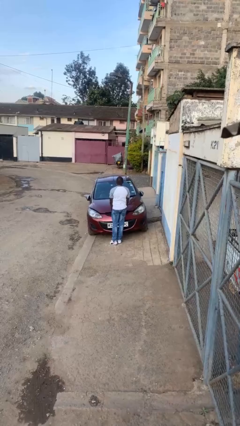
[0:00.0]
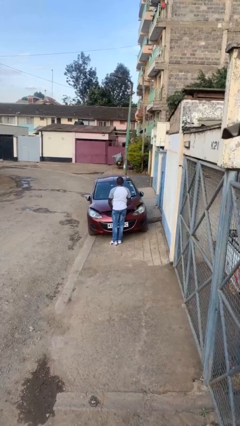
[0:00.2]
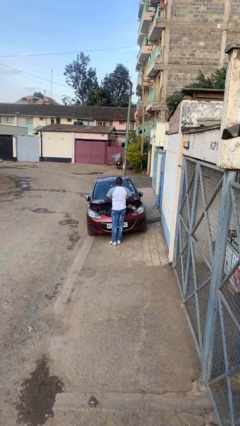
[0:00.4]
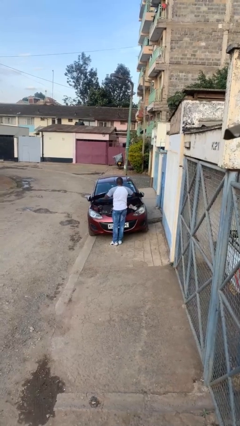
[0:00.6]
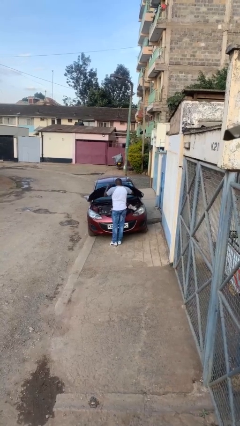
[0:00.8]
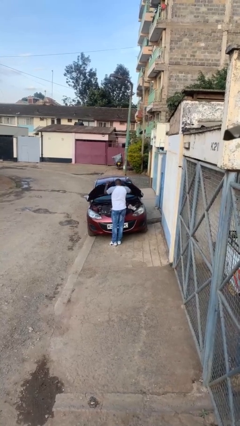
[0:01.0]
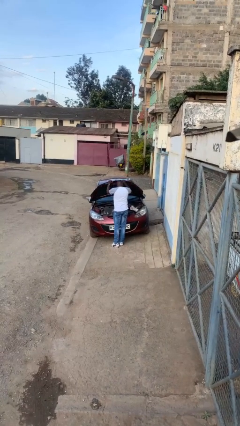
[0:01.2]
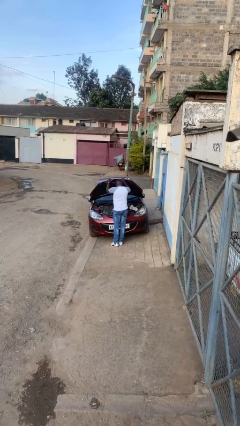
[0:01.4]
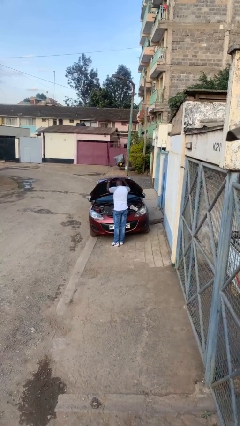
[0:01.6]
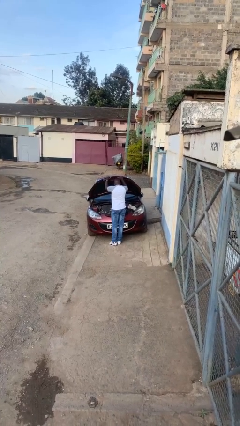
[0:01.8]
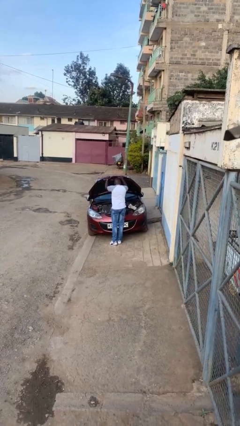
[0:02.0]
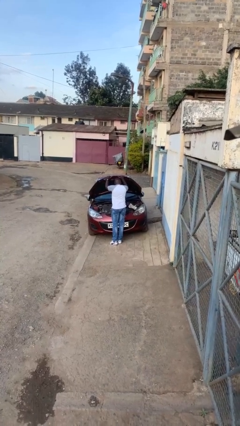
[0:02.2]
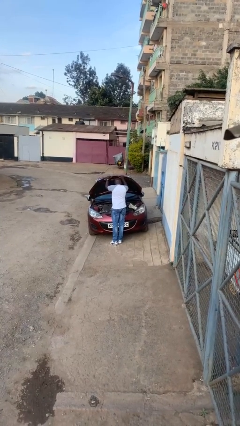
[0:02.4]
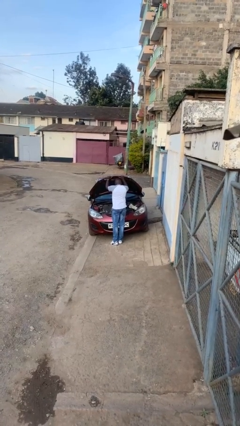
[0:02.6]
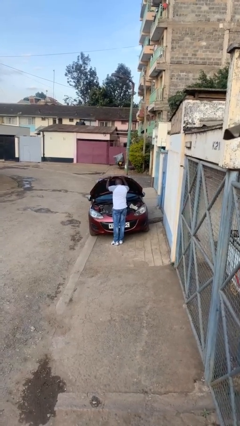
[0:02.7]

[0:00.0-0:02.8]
person opens car hood

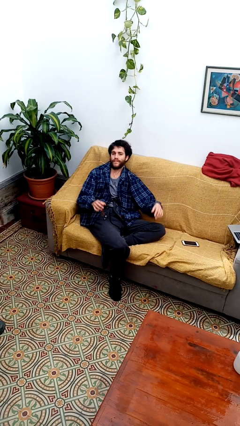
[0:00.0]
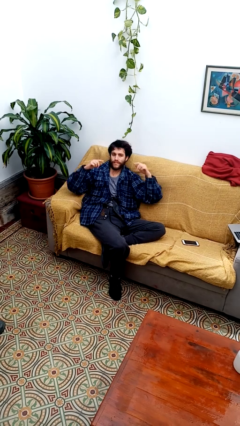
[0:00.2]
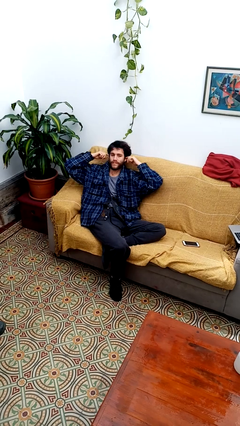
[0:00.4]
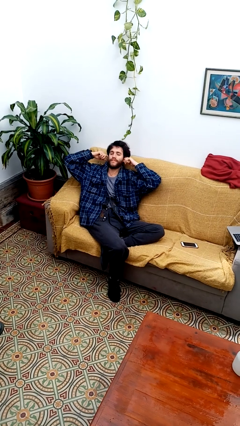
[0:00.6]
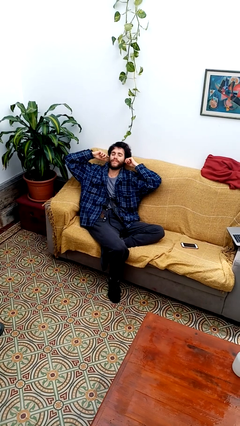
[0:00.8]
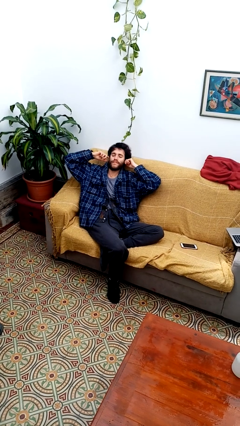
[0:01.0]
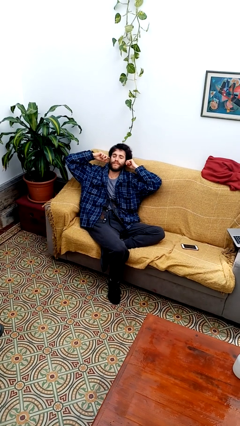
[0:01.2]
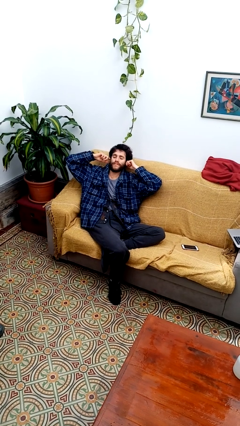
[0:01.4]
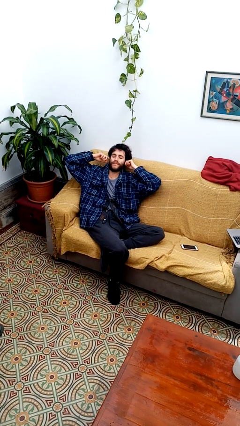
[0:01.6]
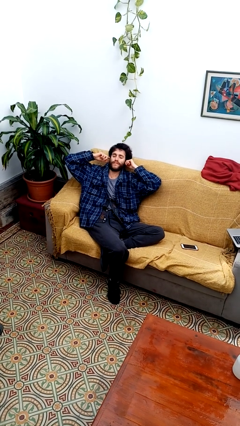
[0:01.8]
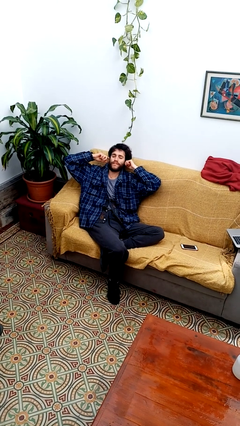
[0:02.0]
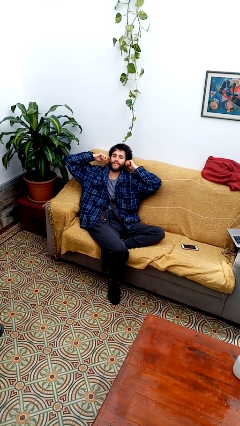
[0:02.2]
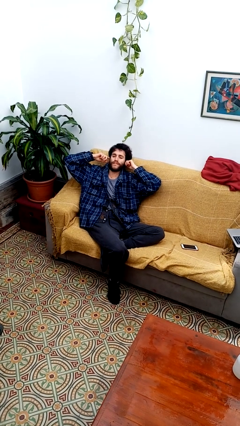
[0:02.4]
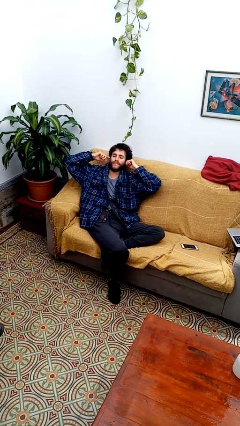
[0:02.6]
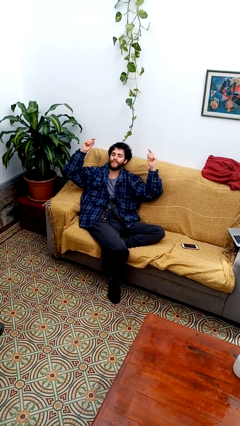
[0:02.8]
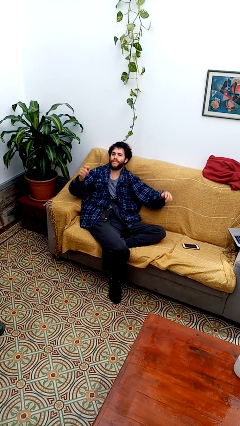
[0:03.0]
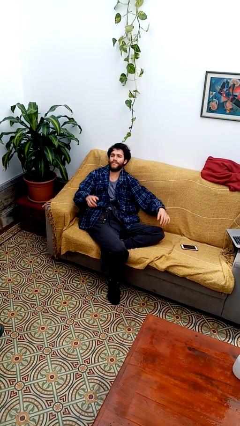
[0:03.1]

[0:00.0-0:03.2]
person puts fingers in ear

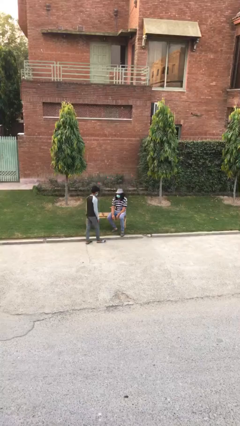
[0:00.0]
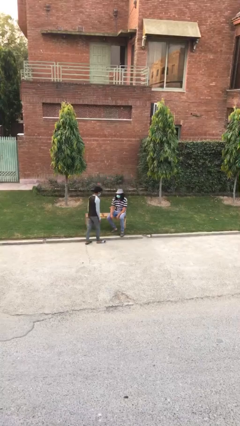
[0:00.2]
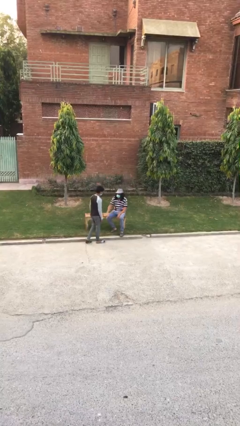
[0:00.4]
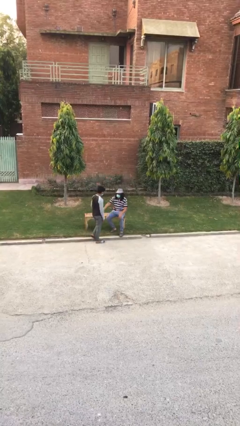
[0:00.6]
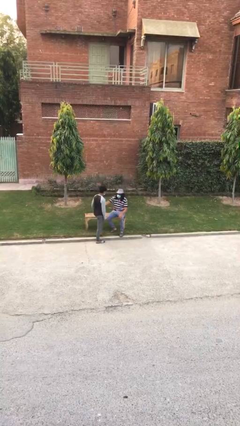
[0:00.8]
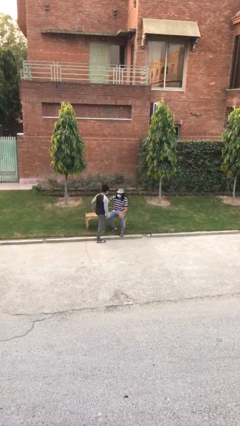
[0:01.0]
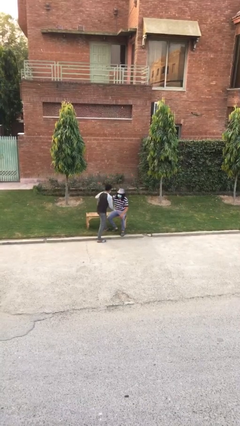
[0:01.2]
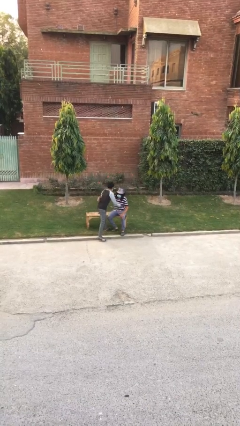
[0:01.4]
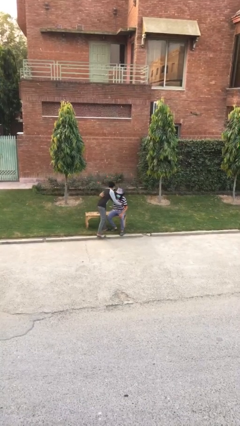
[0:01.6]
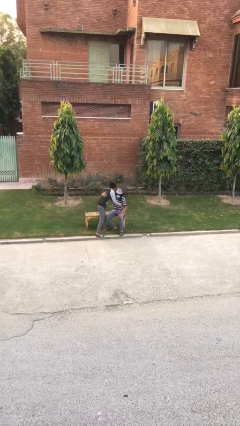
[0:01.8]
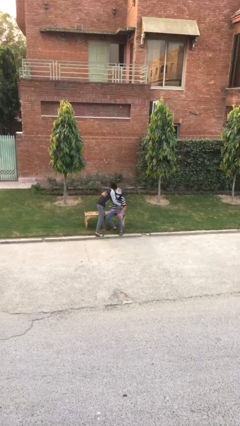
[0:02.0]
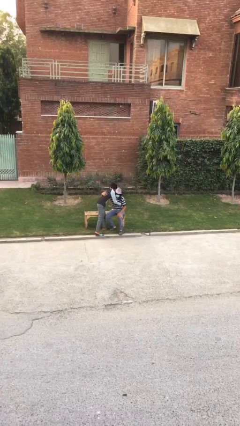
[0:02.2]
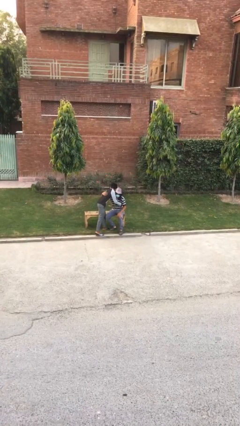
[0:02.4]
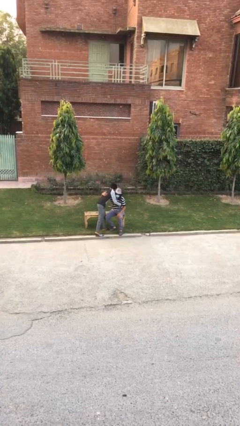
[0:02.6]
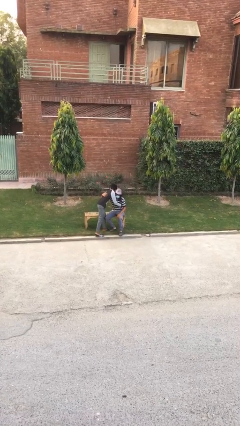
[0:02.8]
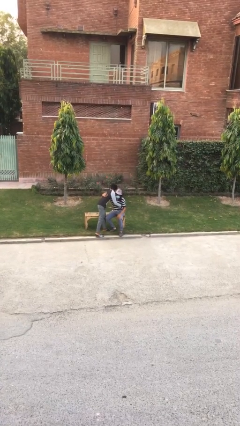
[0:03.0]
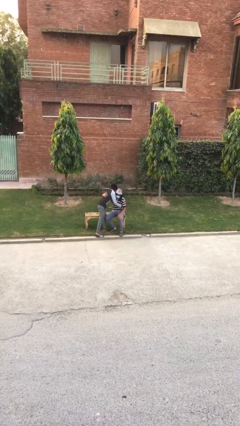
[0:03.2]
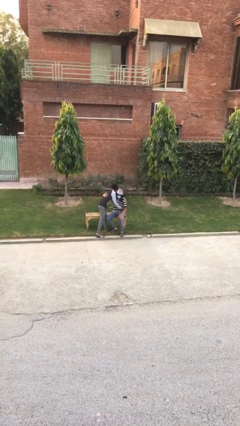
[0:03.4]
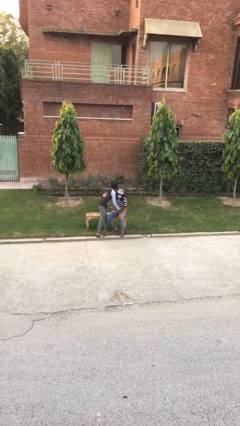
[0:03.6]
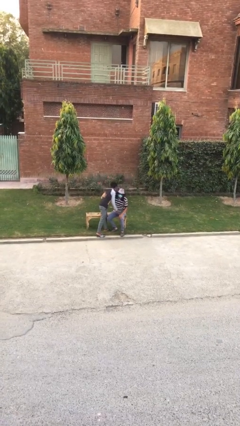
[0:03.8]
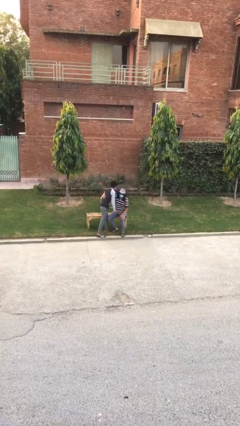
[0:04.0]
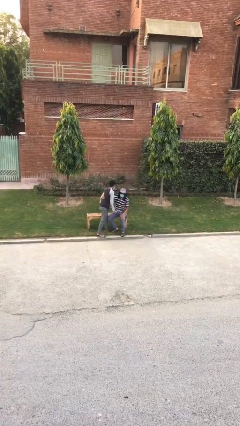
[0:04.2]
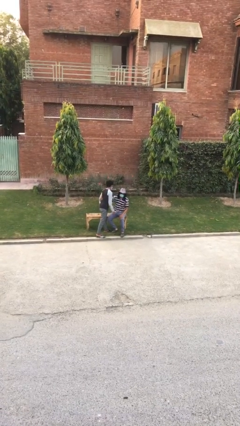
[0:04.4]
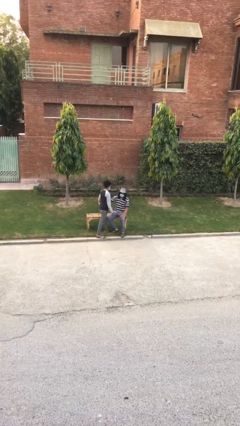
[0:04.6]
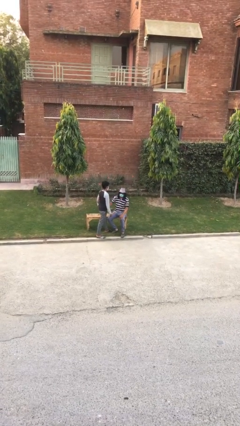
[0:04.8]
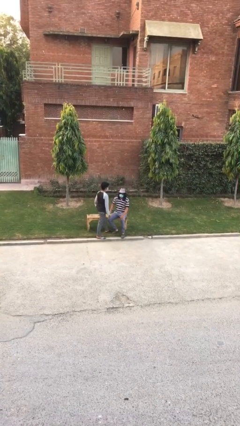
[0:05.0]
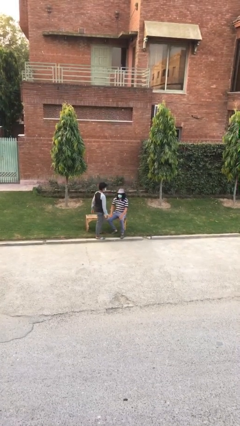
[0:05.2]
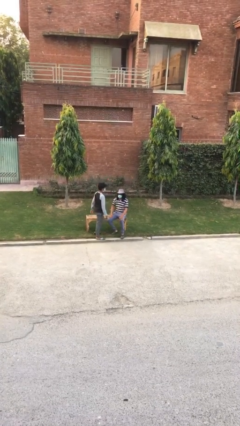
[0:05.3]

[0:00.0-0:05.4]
person embraces person

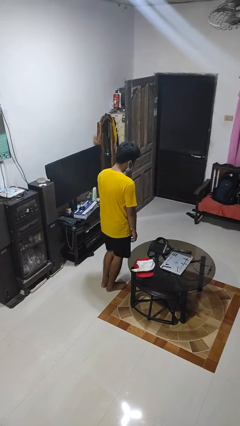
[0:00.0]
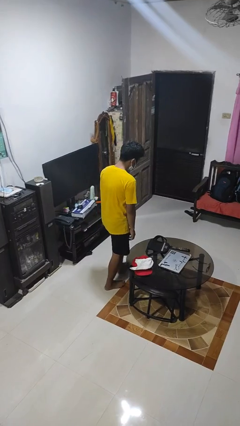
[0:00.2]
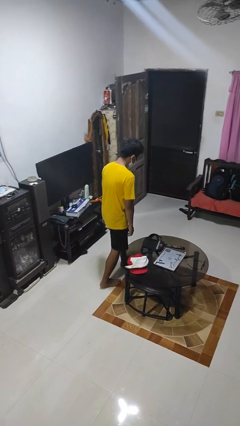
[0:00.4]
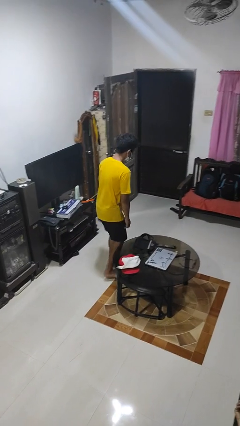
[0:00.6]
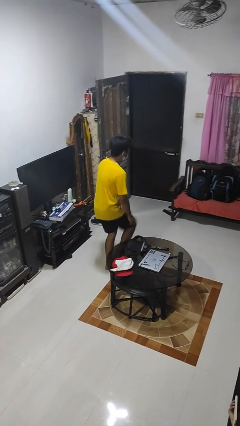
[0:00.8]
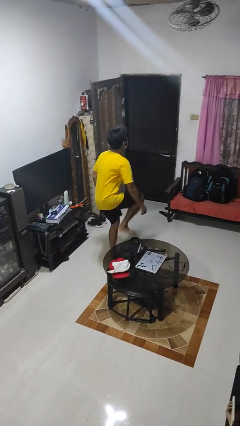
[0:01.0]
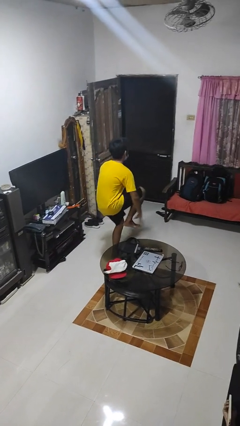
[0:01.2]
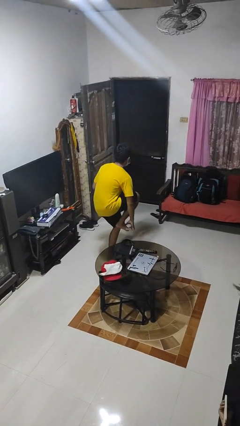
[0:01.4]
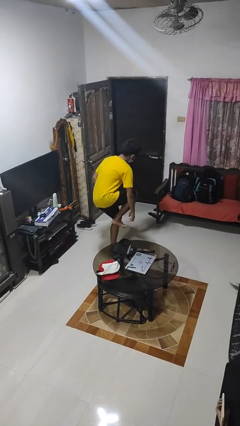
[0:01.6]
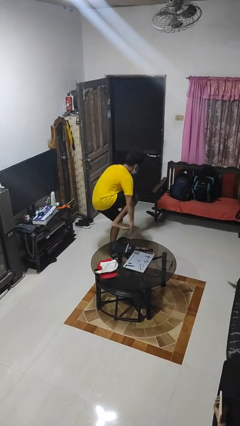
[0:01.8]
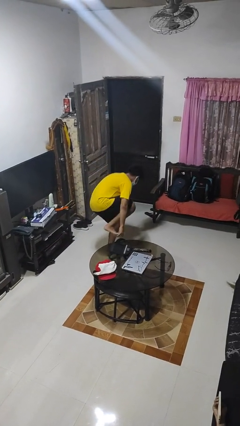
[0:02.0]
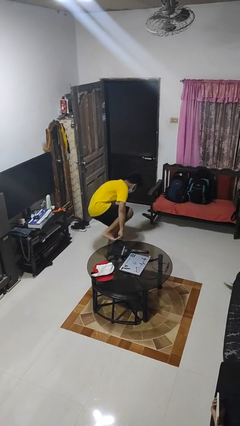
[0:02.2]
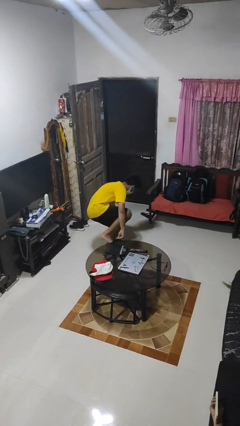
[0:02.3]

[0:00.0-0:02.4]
person trips on object on floor

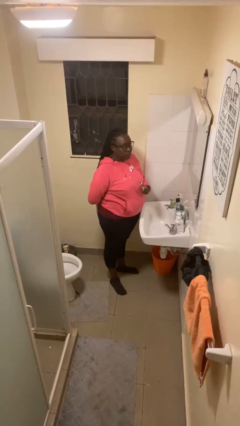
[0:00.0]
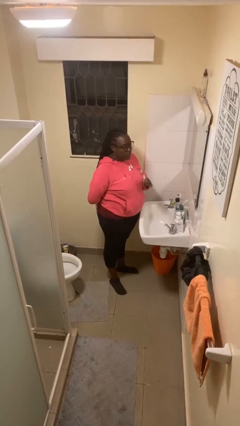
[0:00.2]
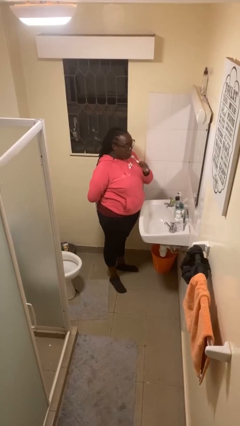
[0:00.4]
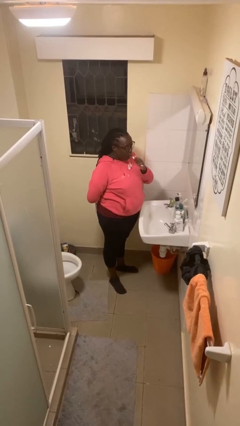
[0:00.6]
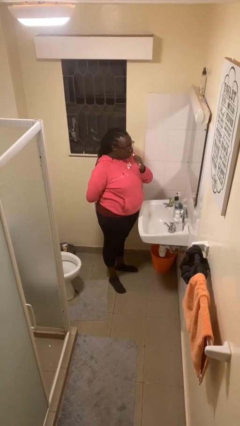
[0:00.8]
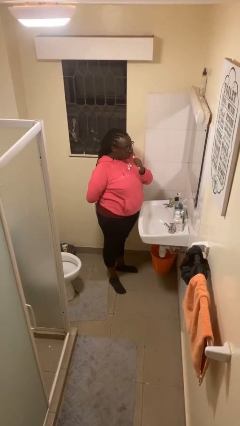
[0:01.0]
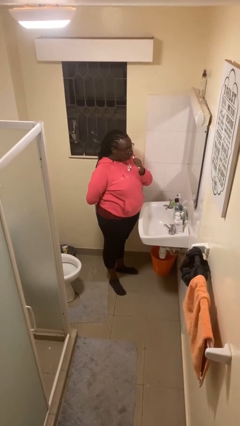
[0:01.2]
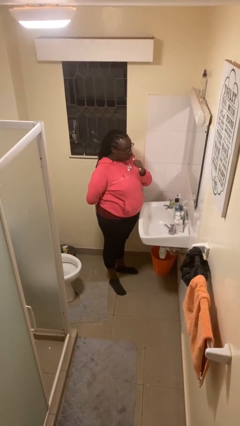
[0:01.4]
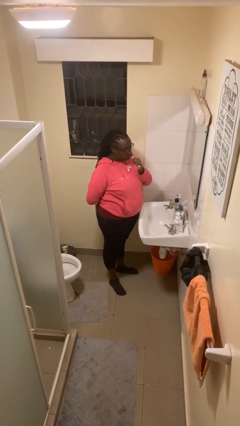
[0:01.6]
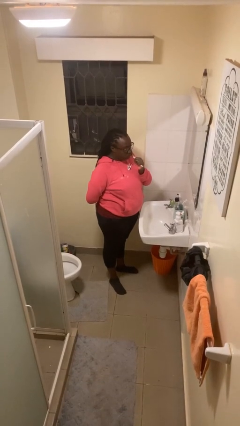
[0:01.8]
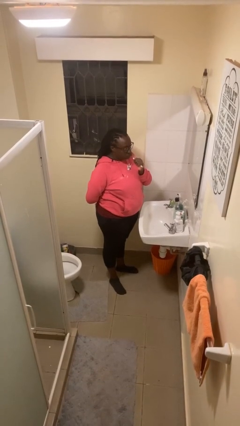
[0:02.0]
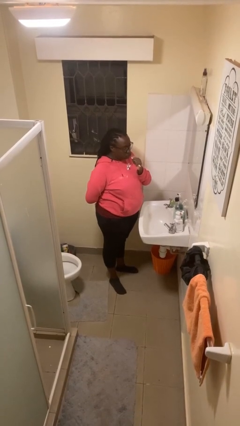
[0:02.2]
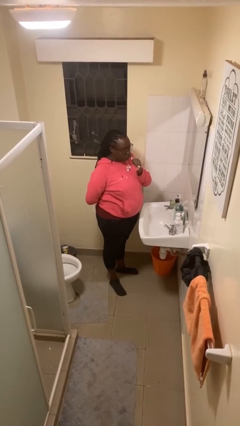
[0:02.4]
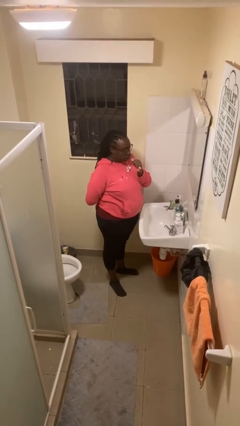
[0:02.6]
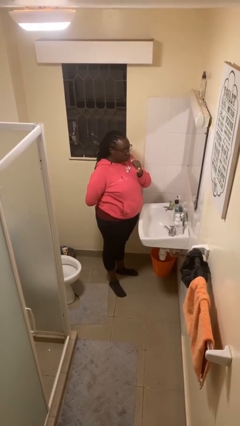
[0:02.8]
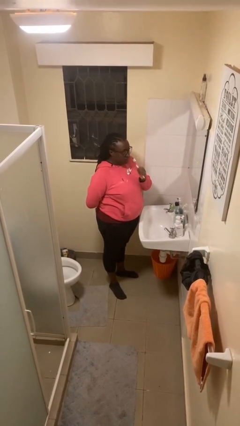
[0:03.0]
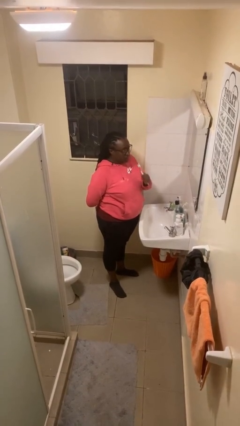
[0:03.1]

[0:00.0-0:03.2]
person brushes teeth
